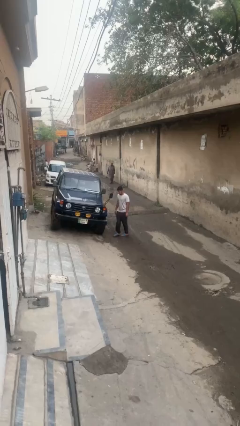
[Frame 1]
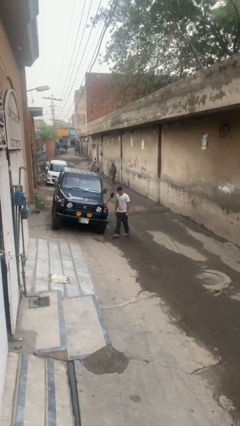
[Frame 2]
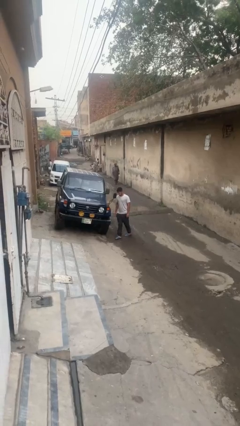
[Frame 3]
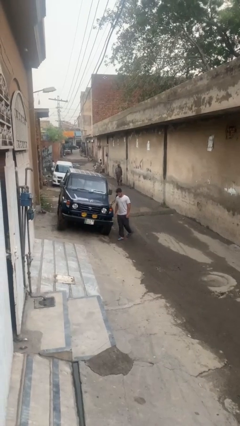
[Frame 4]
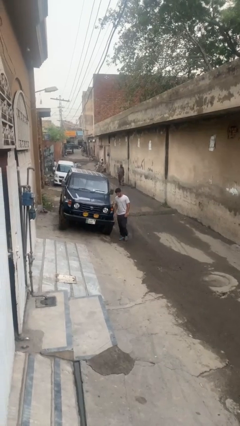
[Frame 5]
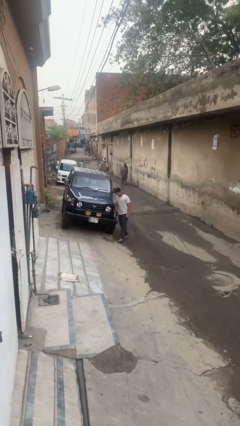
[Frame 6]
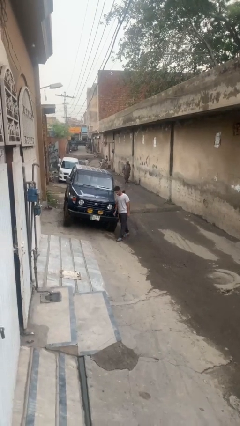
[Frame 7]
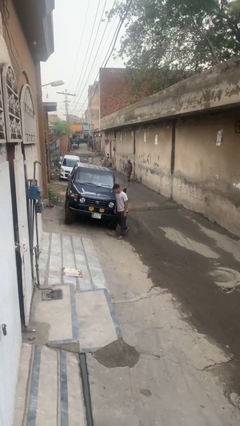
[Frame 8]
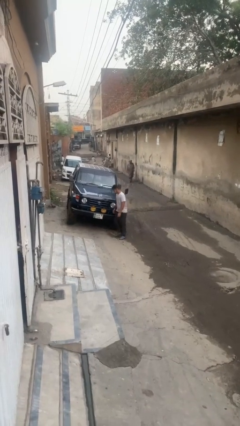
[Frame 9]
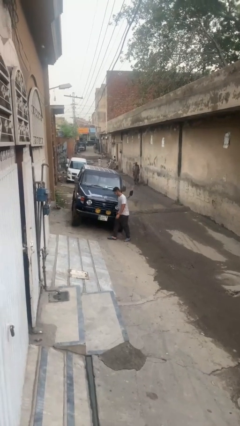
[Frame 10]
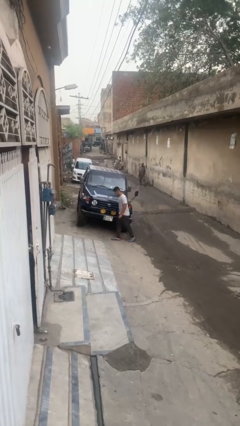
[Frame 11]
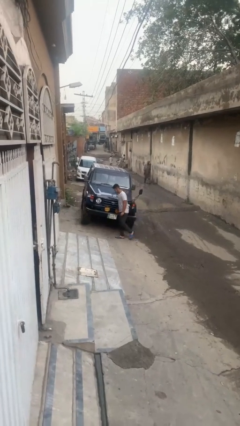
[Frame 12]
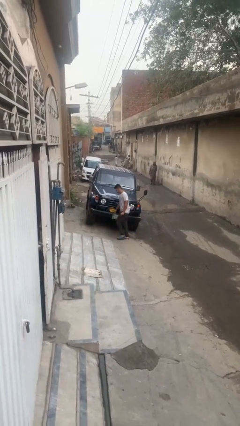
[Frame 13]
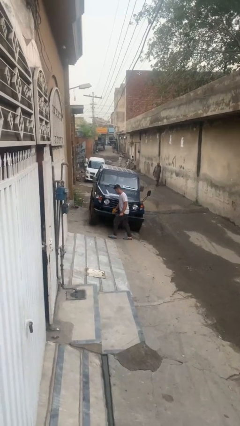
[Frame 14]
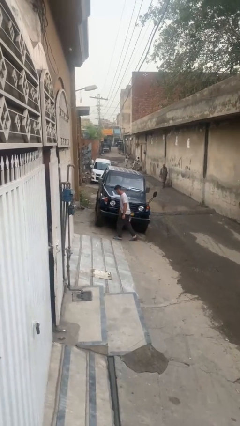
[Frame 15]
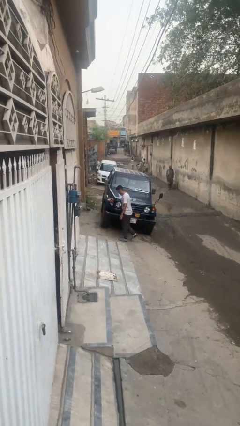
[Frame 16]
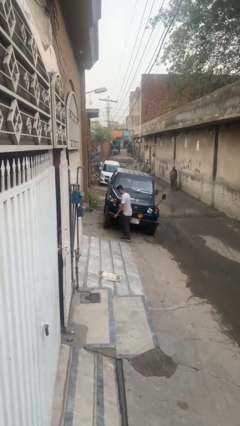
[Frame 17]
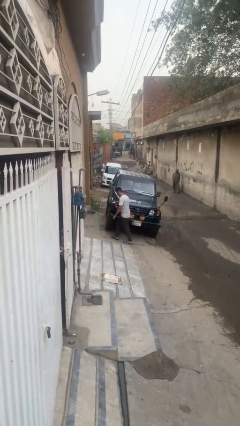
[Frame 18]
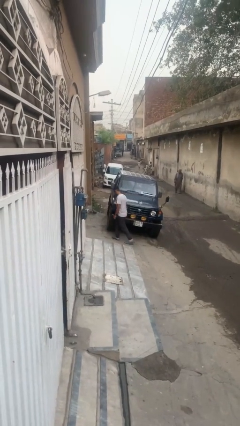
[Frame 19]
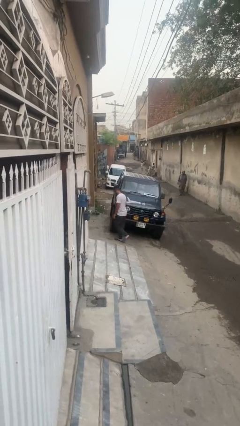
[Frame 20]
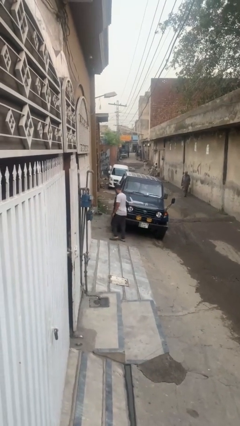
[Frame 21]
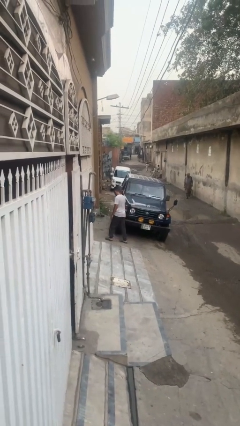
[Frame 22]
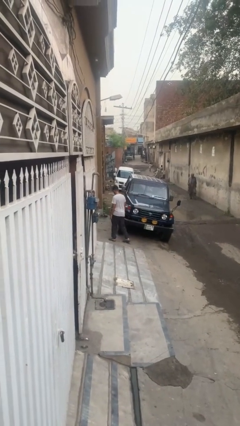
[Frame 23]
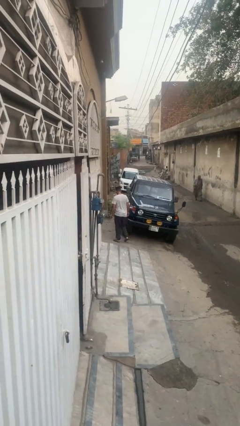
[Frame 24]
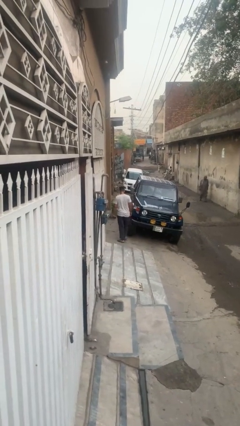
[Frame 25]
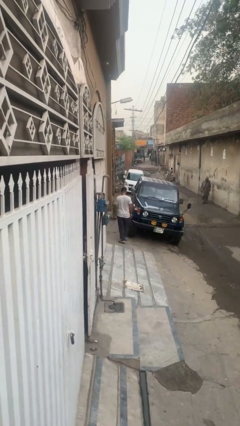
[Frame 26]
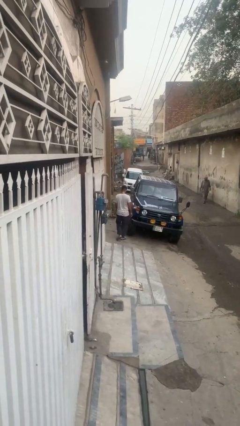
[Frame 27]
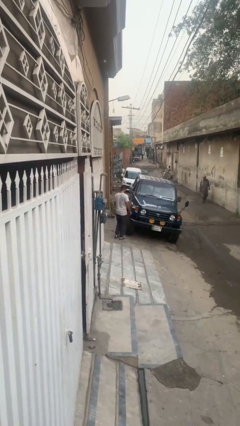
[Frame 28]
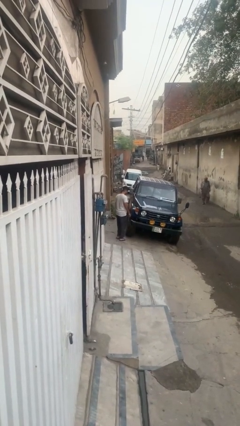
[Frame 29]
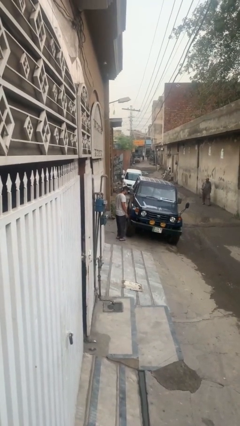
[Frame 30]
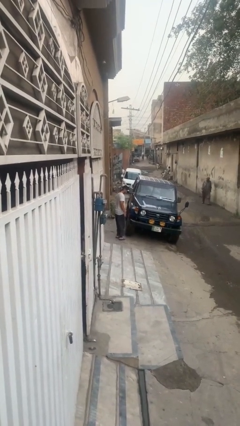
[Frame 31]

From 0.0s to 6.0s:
person walks around car

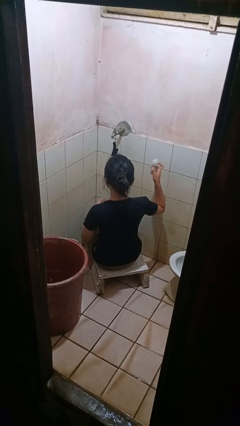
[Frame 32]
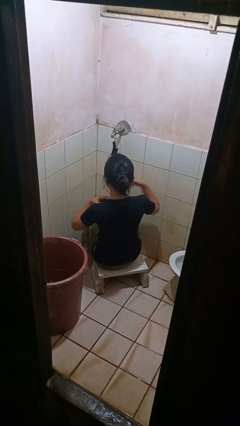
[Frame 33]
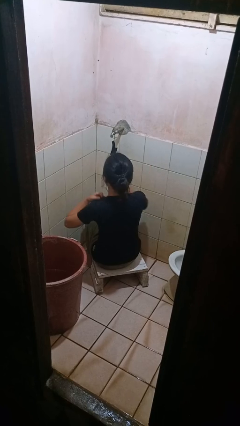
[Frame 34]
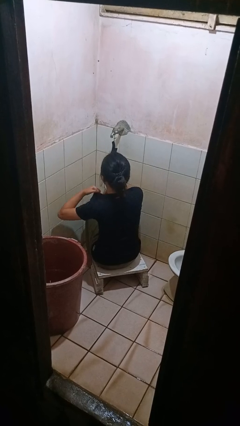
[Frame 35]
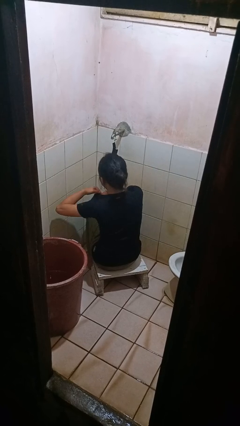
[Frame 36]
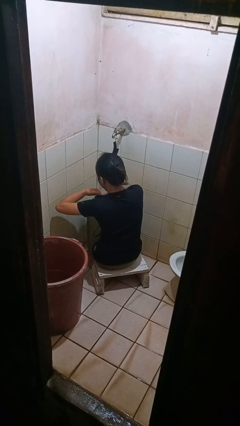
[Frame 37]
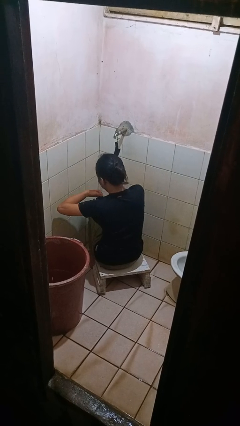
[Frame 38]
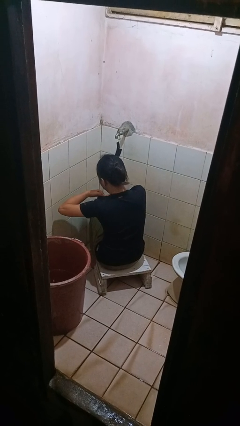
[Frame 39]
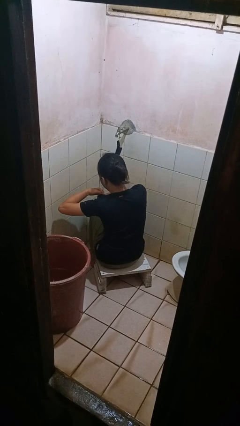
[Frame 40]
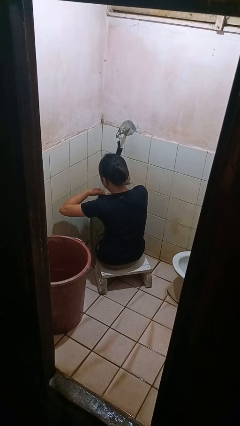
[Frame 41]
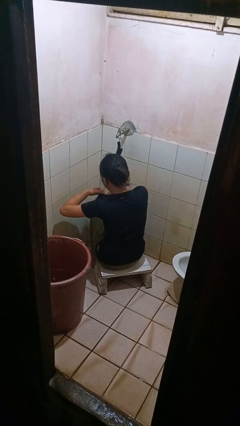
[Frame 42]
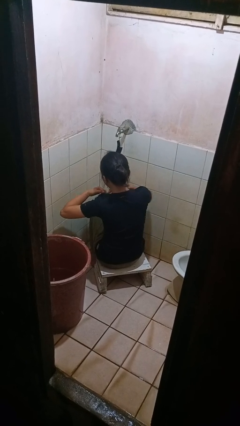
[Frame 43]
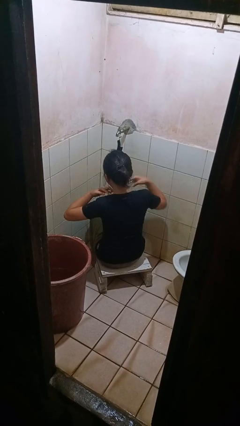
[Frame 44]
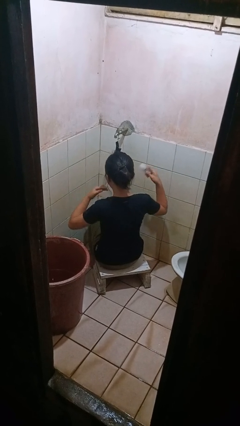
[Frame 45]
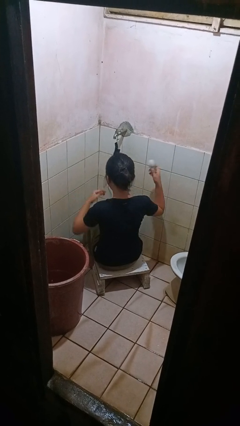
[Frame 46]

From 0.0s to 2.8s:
person applies deodorant

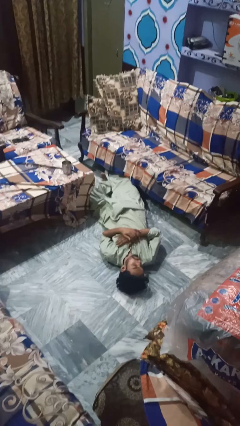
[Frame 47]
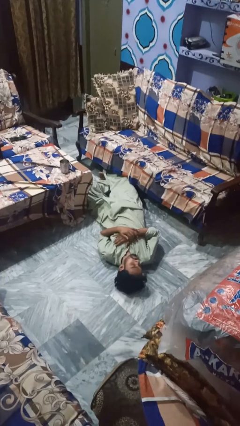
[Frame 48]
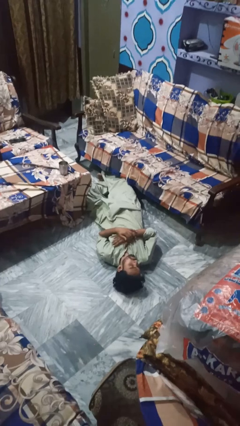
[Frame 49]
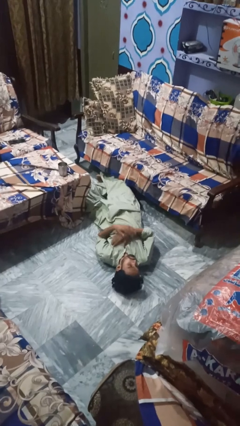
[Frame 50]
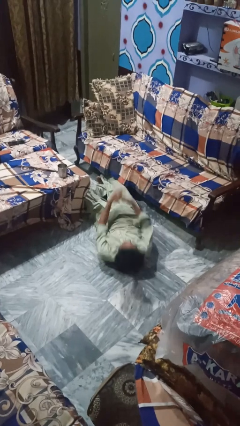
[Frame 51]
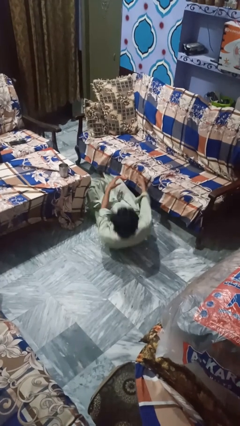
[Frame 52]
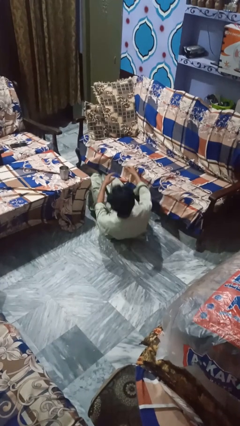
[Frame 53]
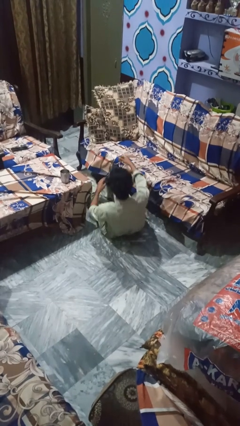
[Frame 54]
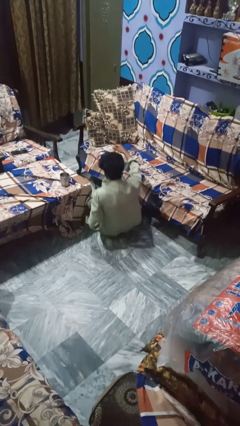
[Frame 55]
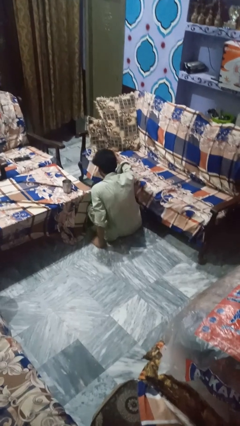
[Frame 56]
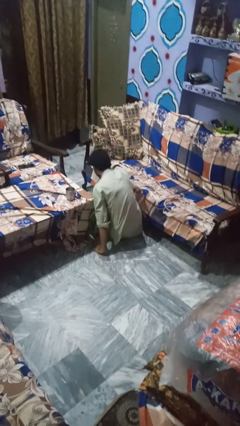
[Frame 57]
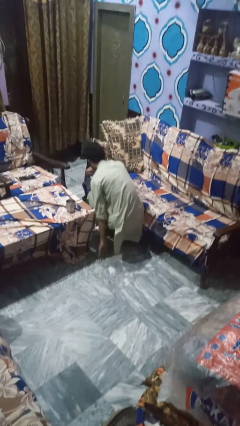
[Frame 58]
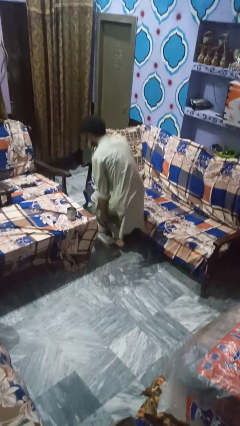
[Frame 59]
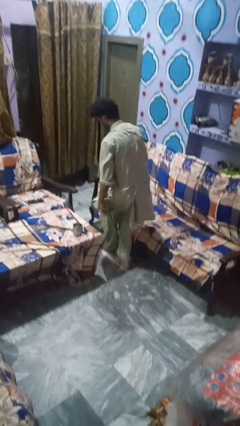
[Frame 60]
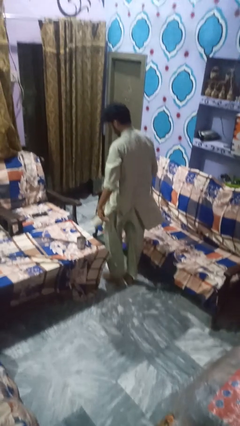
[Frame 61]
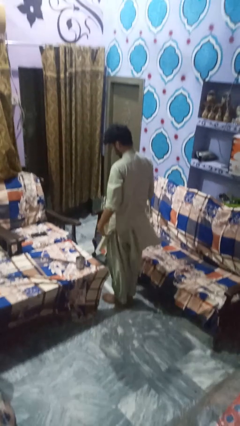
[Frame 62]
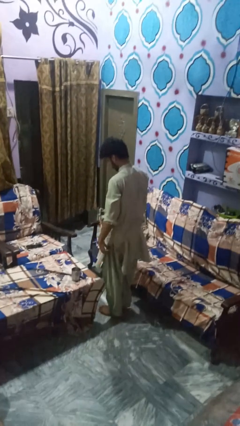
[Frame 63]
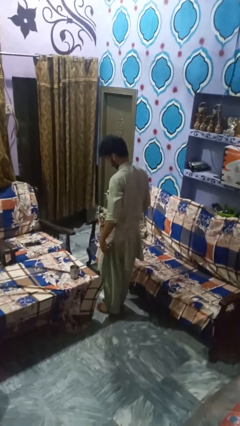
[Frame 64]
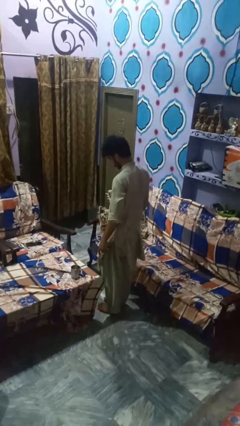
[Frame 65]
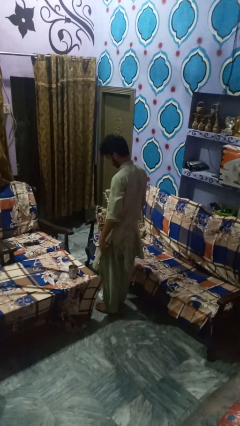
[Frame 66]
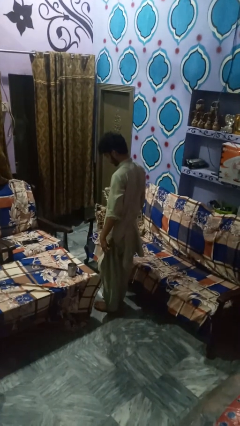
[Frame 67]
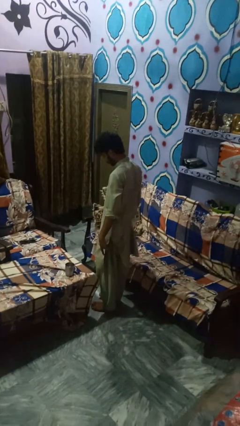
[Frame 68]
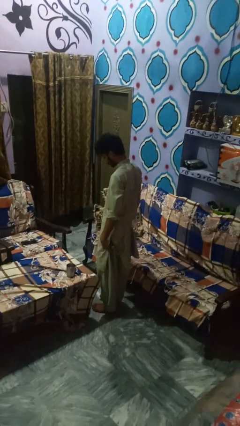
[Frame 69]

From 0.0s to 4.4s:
person stands up from floor

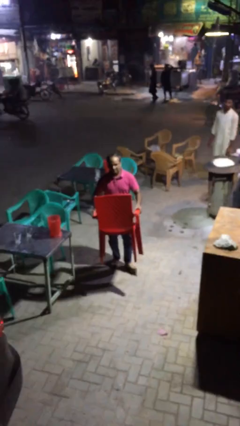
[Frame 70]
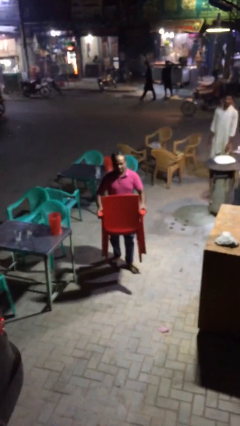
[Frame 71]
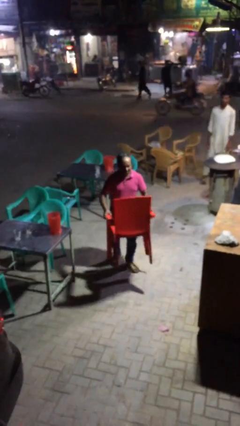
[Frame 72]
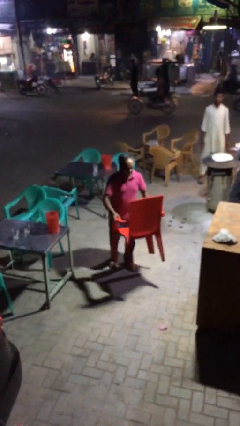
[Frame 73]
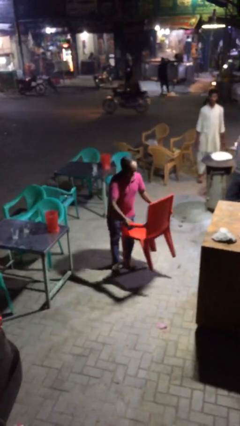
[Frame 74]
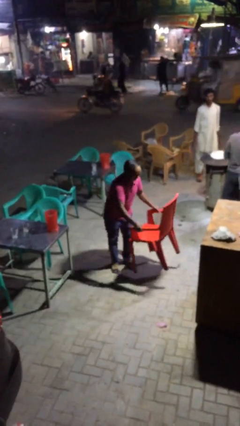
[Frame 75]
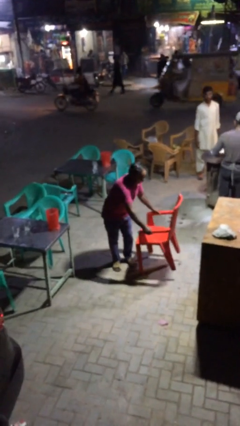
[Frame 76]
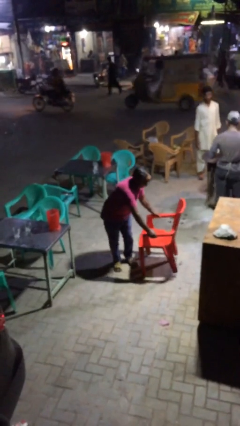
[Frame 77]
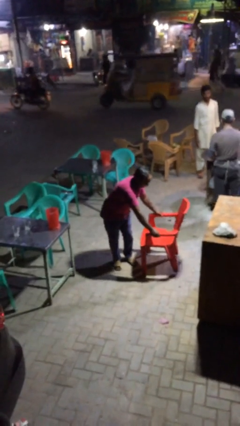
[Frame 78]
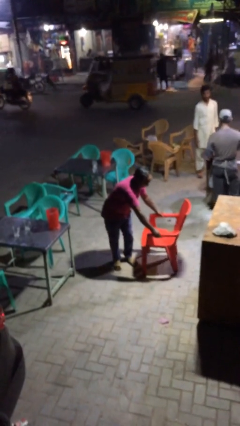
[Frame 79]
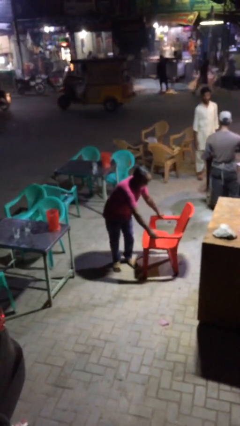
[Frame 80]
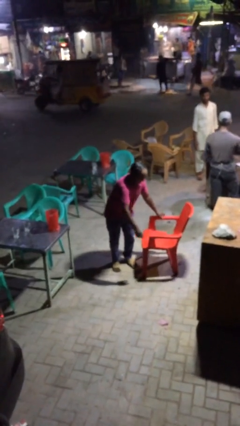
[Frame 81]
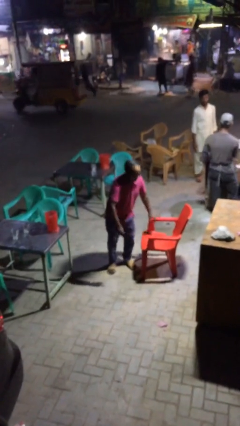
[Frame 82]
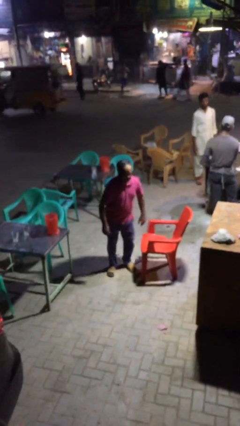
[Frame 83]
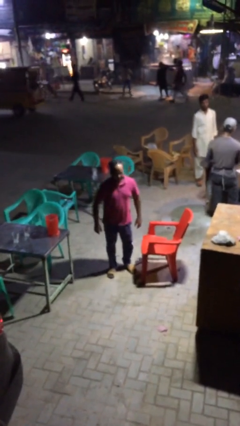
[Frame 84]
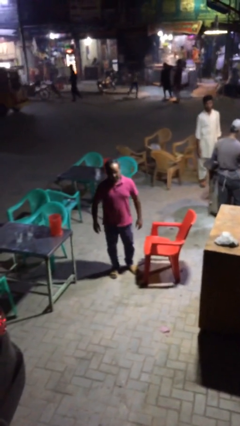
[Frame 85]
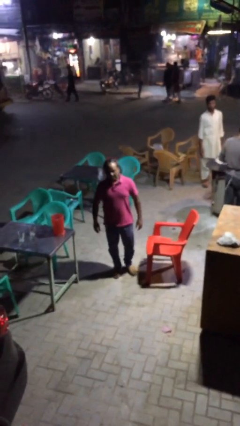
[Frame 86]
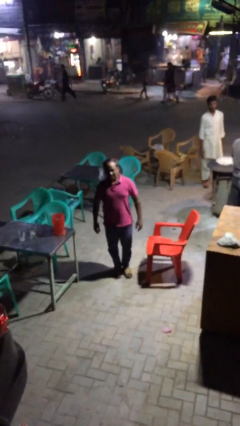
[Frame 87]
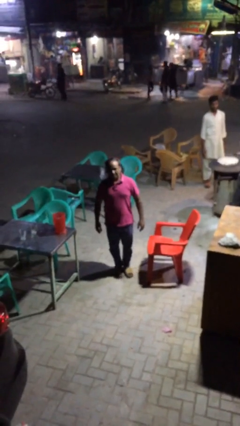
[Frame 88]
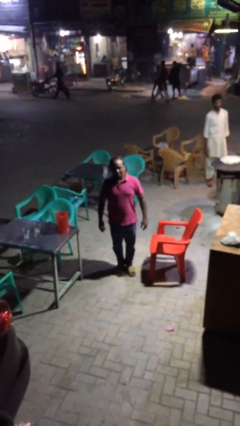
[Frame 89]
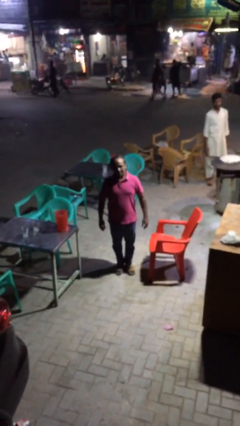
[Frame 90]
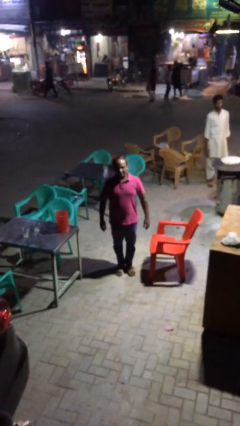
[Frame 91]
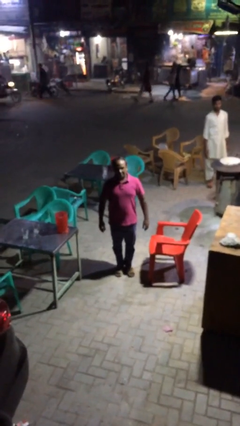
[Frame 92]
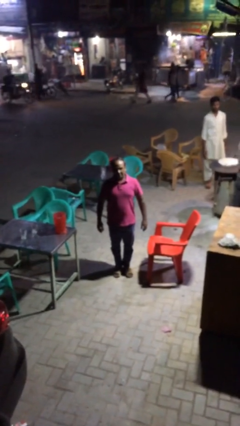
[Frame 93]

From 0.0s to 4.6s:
person puts down object on floor

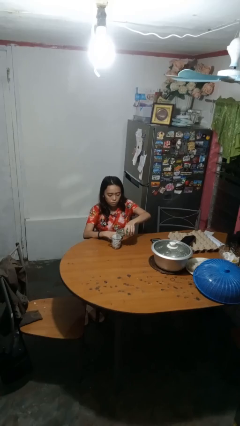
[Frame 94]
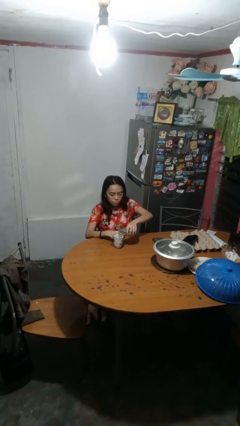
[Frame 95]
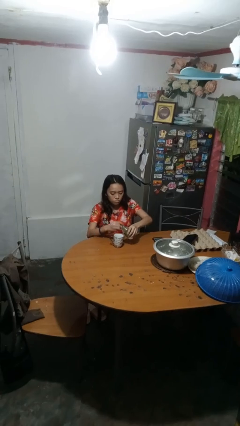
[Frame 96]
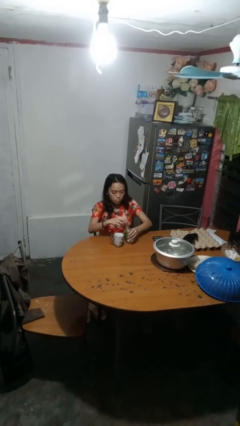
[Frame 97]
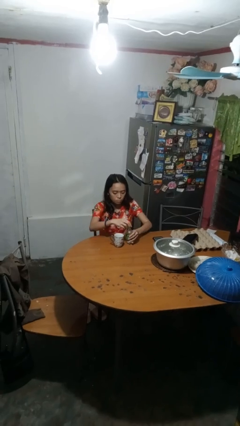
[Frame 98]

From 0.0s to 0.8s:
person screws lid to bottle
